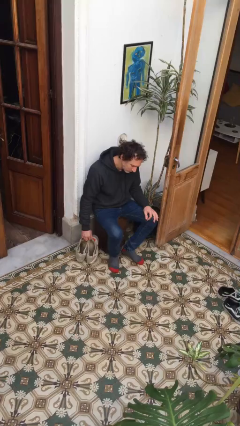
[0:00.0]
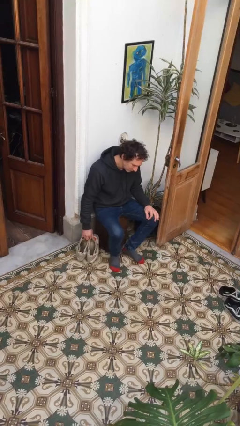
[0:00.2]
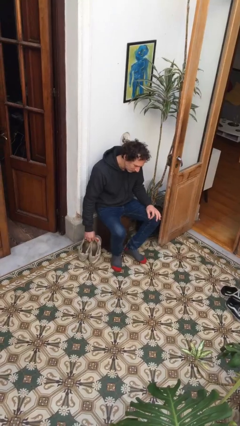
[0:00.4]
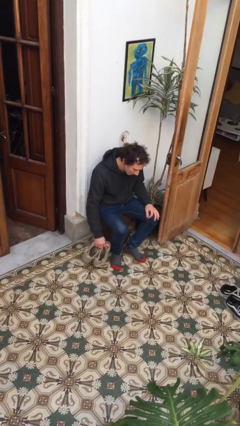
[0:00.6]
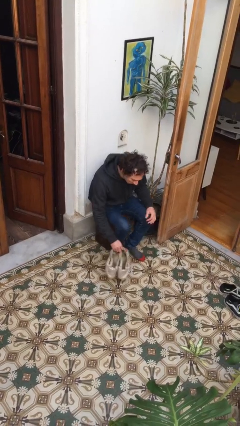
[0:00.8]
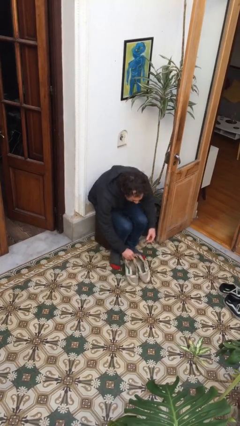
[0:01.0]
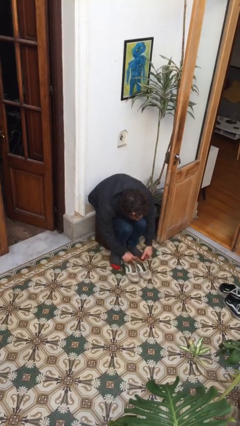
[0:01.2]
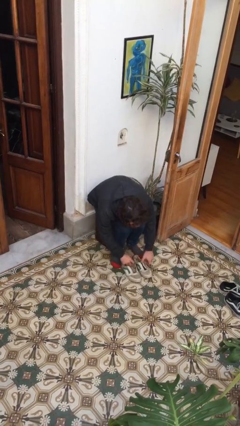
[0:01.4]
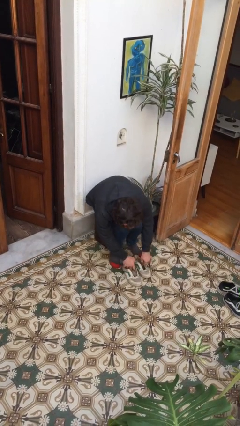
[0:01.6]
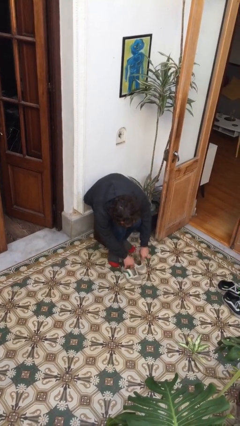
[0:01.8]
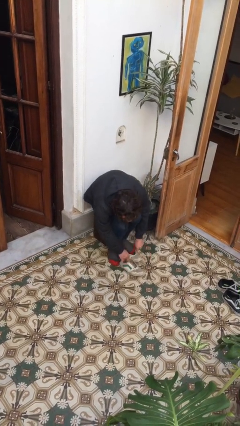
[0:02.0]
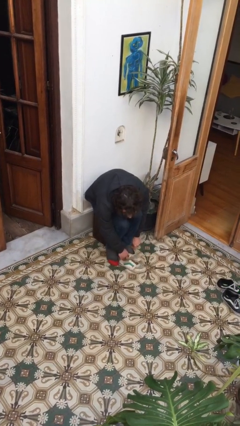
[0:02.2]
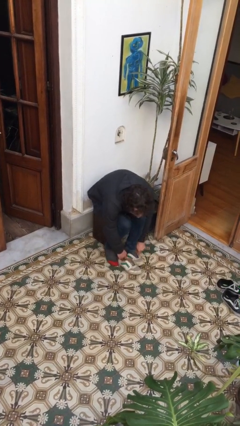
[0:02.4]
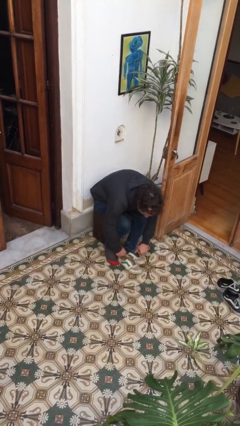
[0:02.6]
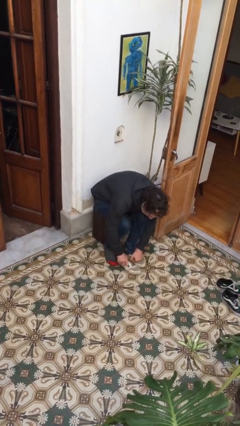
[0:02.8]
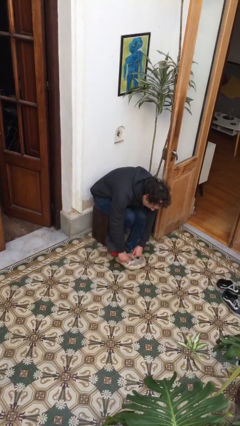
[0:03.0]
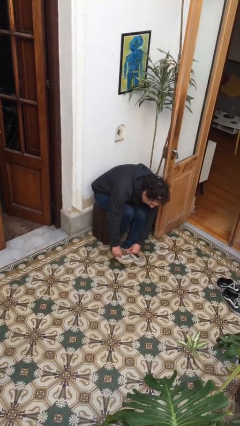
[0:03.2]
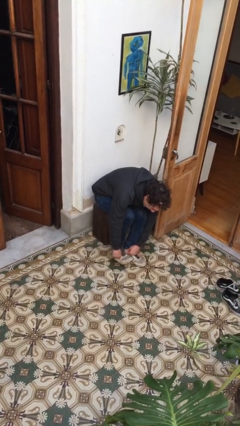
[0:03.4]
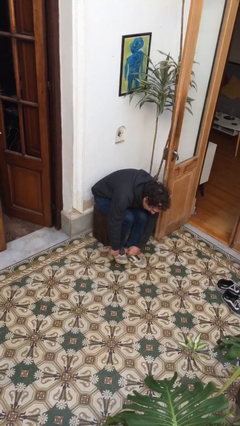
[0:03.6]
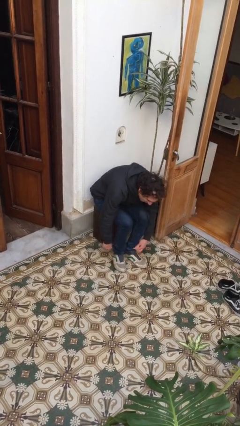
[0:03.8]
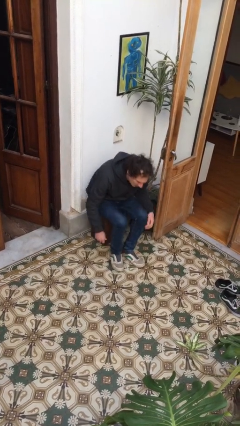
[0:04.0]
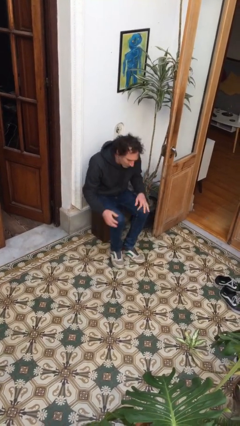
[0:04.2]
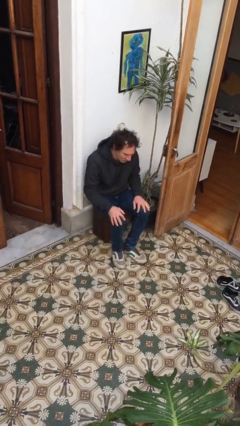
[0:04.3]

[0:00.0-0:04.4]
person puts on shoes

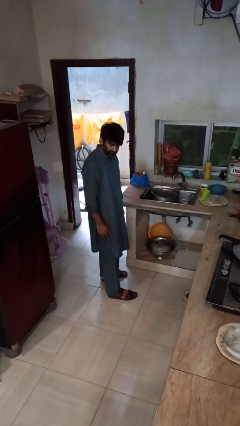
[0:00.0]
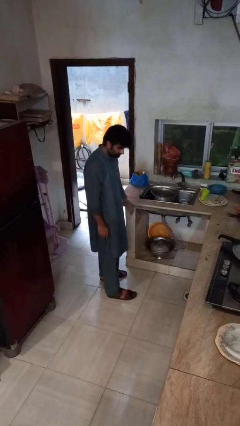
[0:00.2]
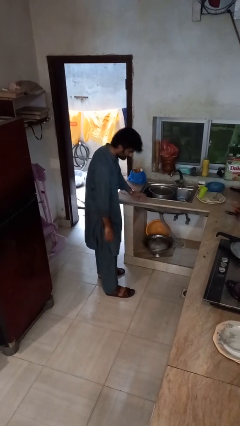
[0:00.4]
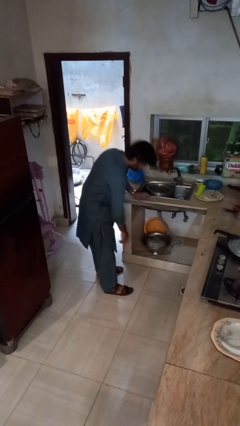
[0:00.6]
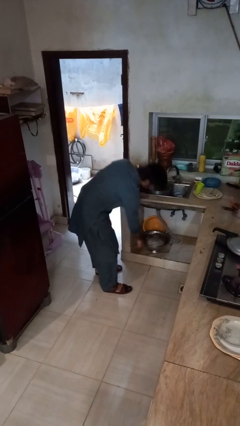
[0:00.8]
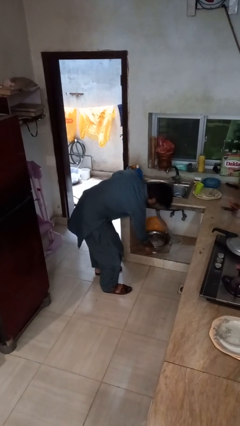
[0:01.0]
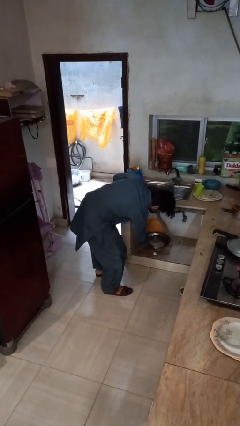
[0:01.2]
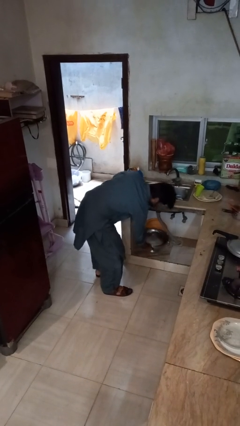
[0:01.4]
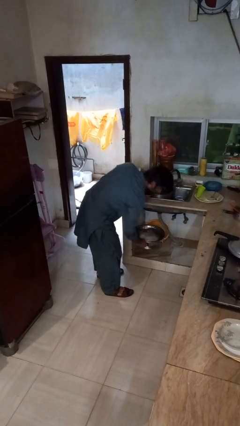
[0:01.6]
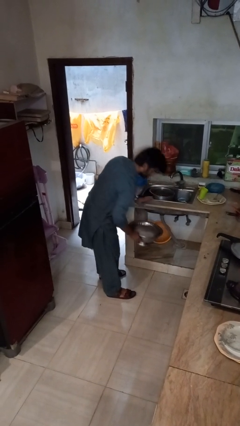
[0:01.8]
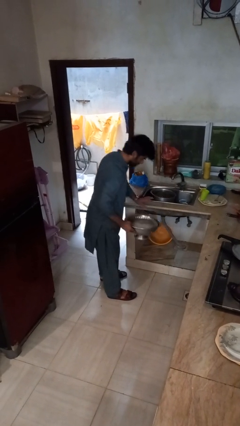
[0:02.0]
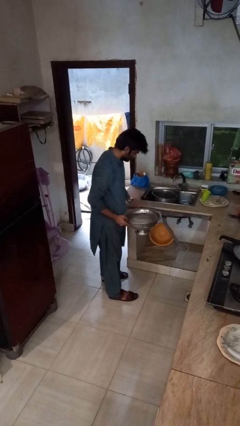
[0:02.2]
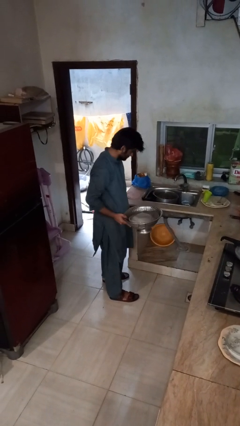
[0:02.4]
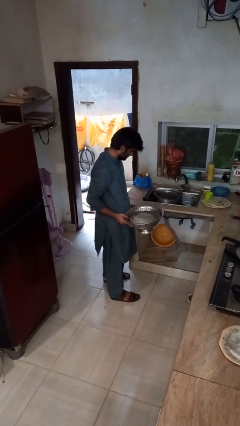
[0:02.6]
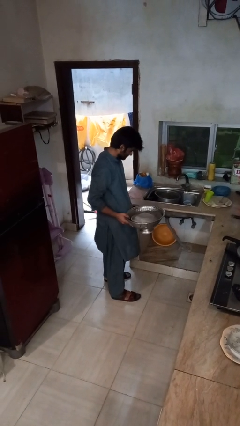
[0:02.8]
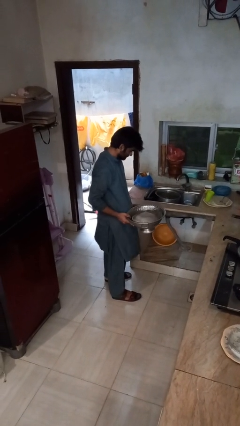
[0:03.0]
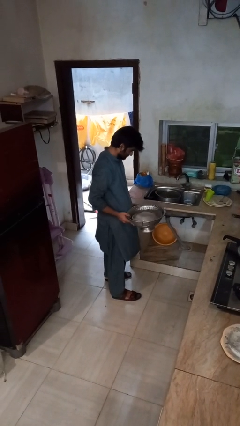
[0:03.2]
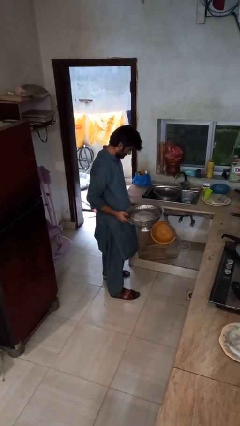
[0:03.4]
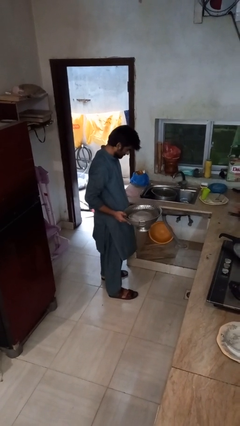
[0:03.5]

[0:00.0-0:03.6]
person picks up object from cabinet

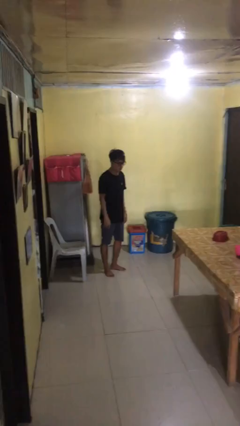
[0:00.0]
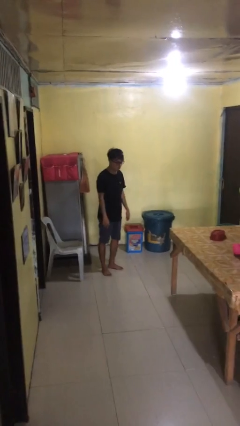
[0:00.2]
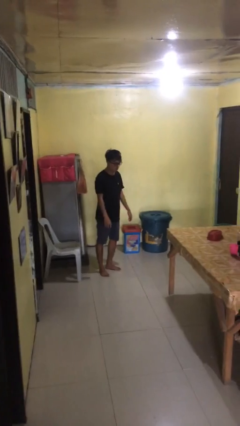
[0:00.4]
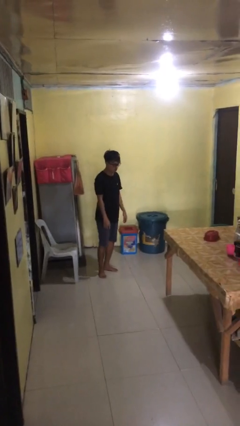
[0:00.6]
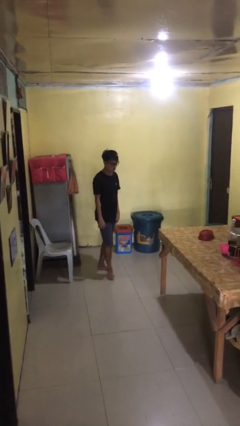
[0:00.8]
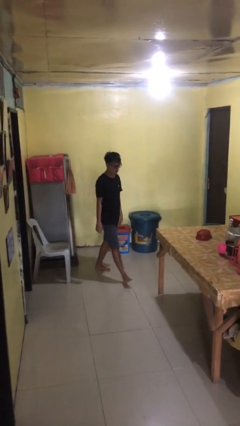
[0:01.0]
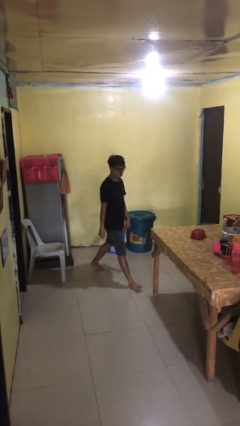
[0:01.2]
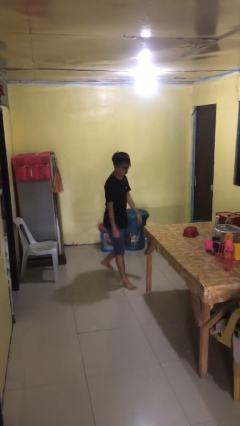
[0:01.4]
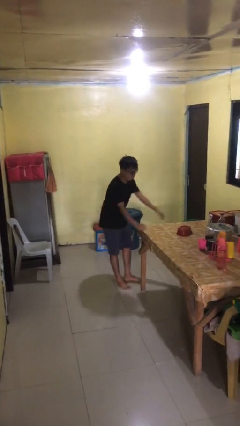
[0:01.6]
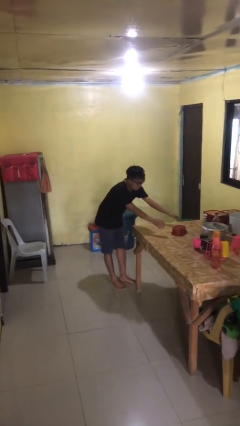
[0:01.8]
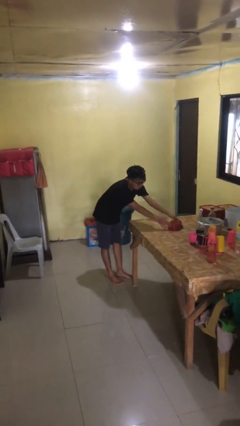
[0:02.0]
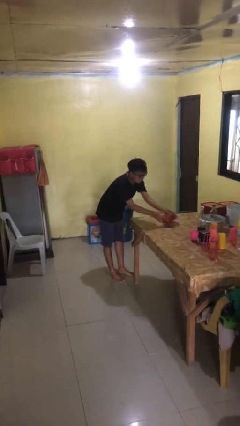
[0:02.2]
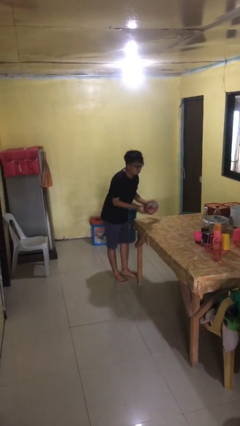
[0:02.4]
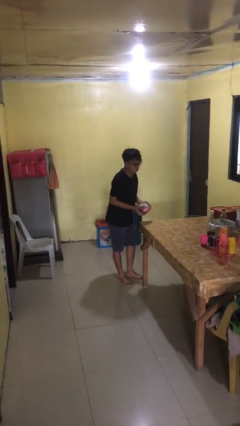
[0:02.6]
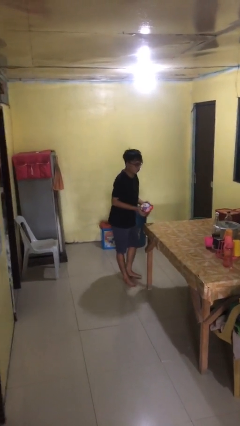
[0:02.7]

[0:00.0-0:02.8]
person picks up object from table

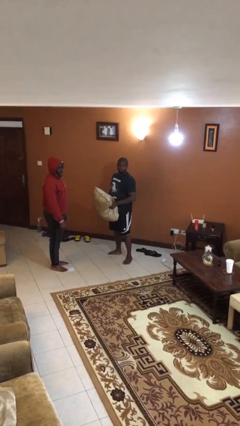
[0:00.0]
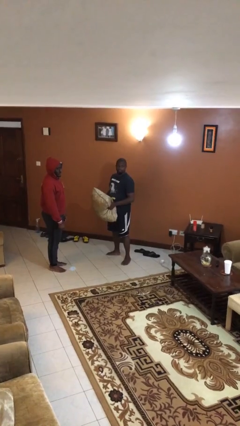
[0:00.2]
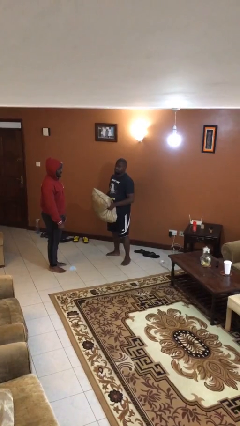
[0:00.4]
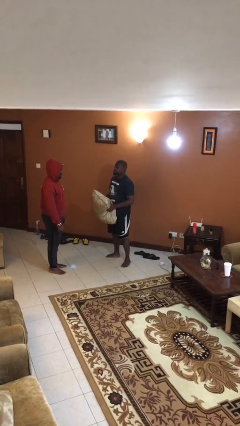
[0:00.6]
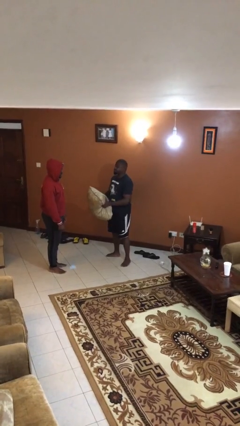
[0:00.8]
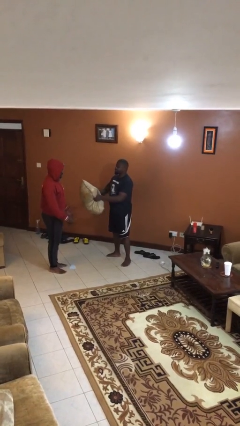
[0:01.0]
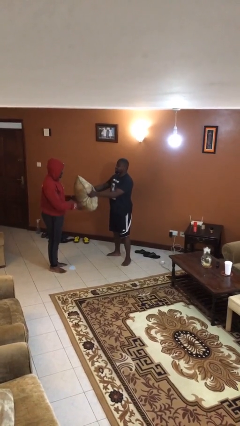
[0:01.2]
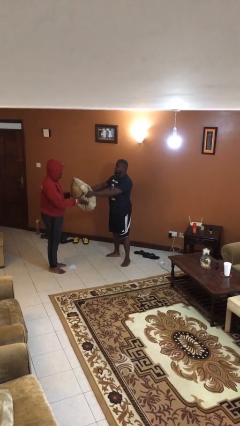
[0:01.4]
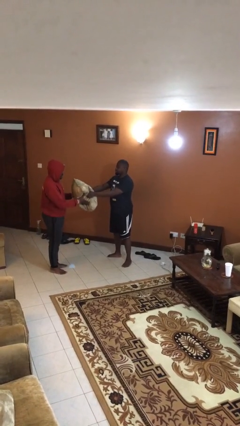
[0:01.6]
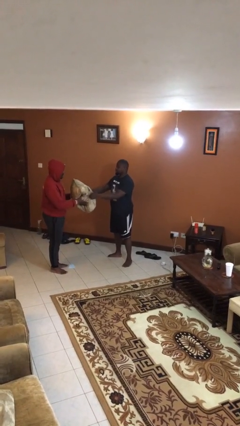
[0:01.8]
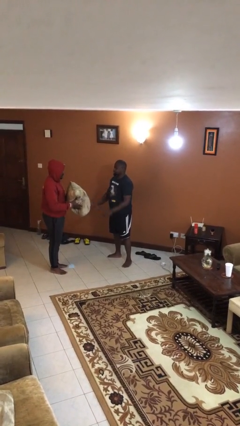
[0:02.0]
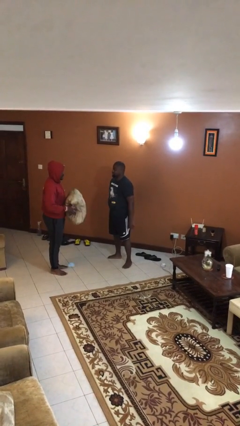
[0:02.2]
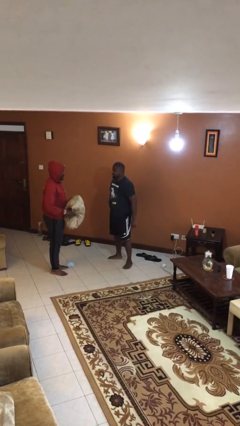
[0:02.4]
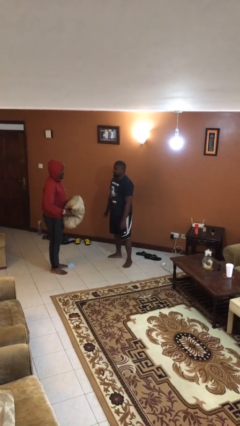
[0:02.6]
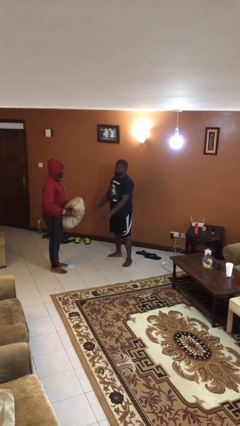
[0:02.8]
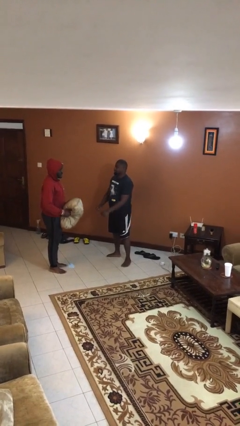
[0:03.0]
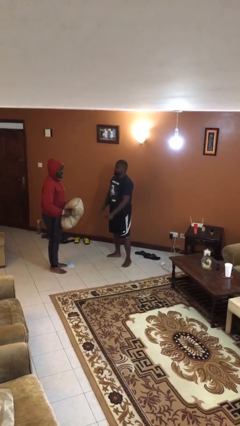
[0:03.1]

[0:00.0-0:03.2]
person transfers object to person

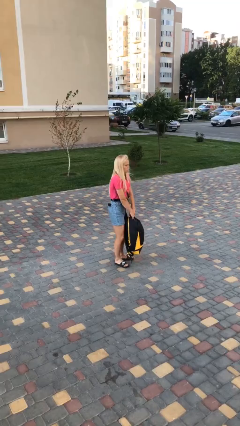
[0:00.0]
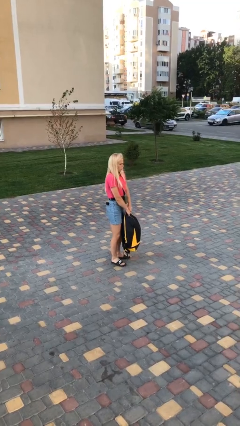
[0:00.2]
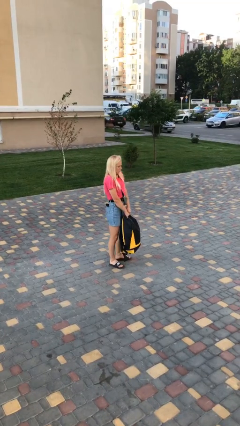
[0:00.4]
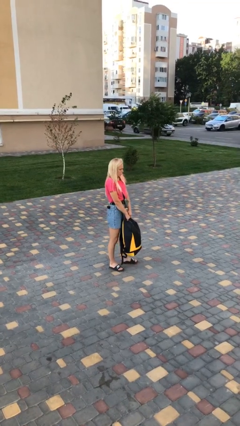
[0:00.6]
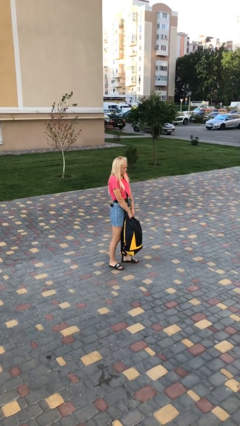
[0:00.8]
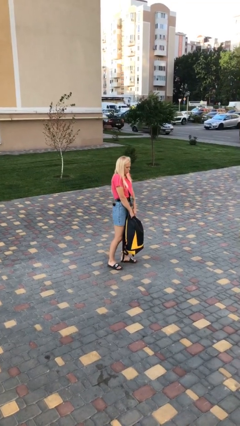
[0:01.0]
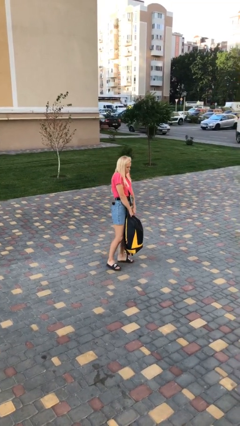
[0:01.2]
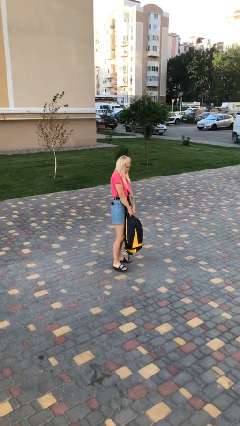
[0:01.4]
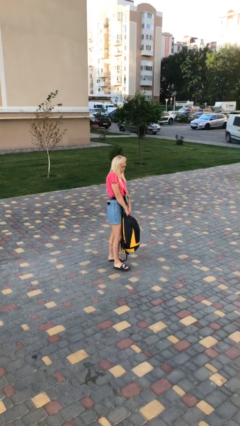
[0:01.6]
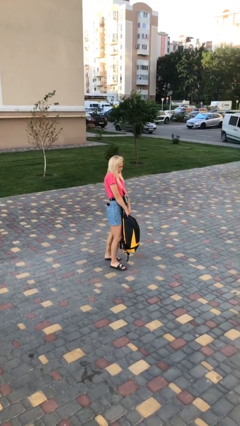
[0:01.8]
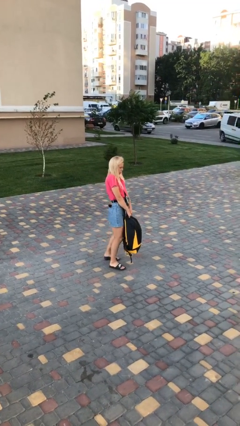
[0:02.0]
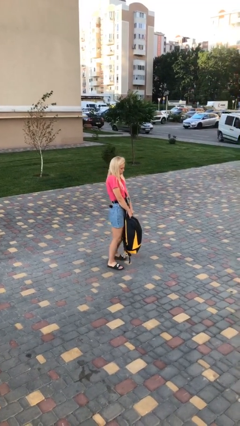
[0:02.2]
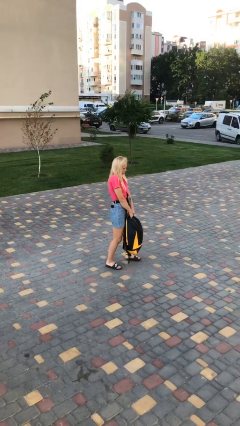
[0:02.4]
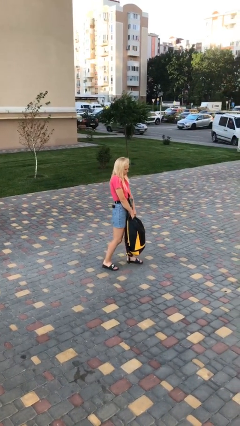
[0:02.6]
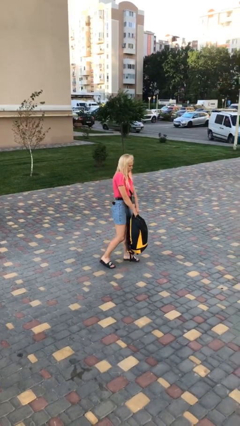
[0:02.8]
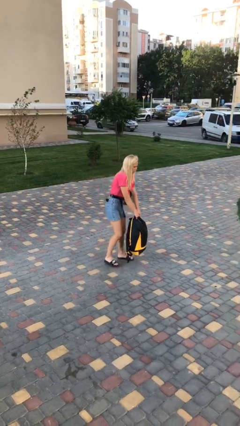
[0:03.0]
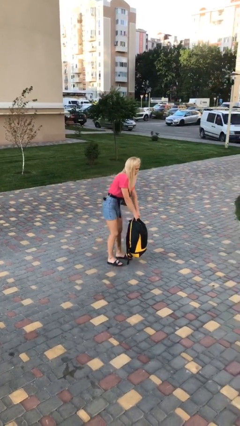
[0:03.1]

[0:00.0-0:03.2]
person carries heavy object

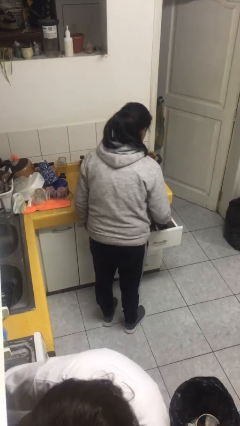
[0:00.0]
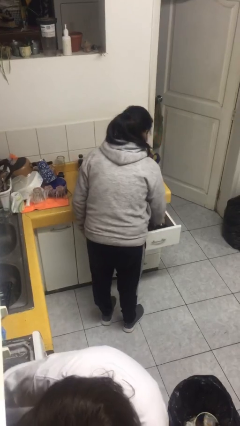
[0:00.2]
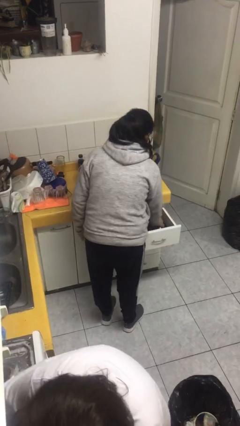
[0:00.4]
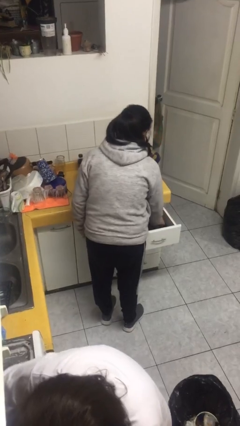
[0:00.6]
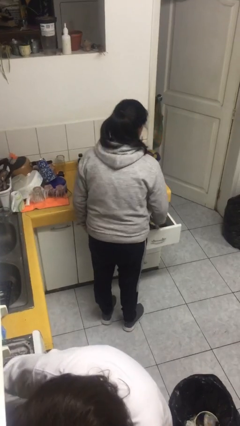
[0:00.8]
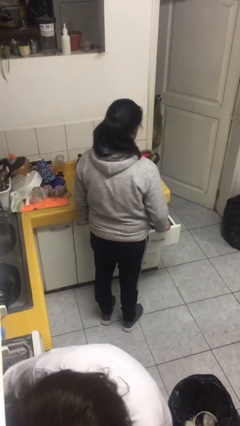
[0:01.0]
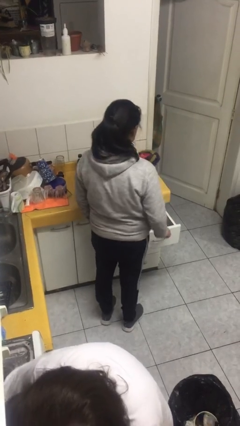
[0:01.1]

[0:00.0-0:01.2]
person puts object into kitchen drawer
